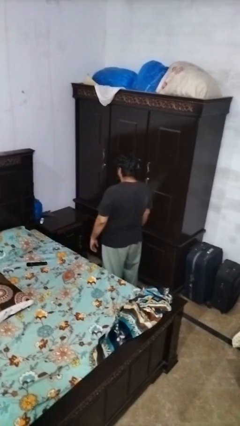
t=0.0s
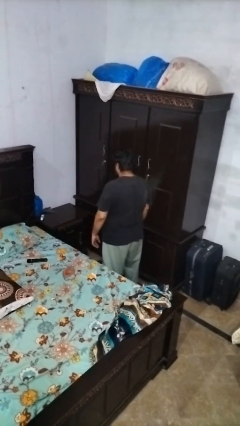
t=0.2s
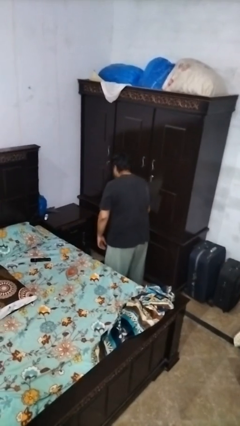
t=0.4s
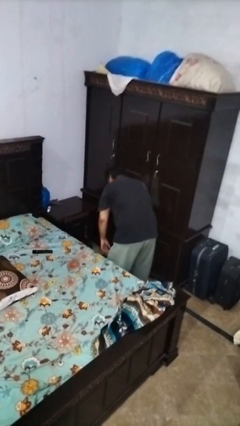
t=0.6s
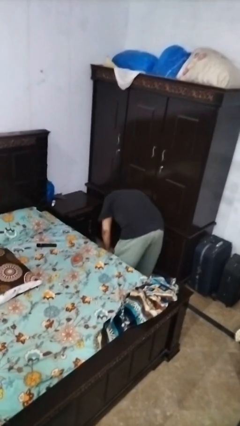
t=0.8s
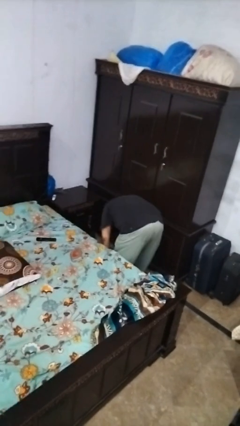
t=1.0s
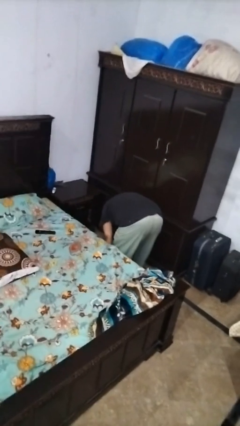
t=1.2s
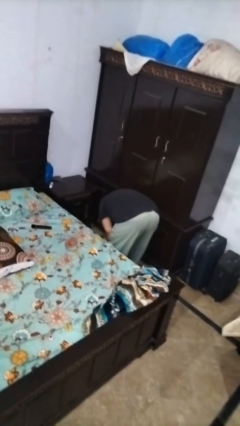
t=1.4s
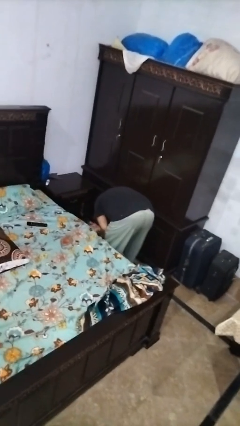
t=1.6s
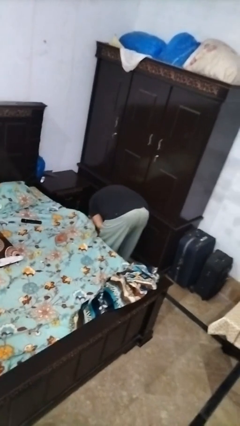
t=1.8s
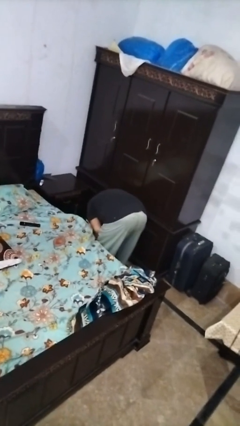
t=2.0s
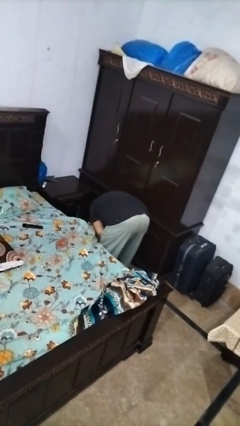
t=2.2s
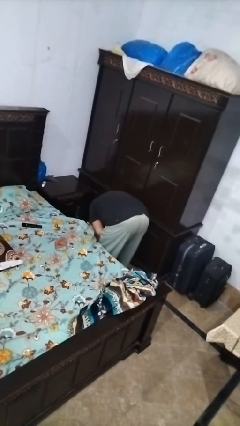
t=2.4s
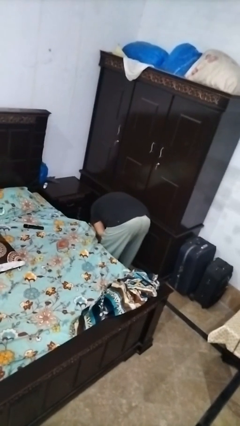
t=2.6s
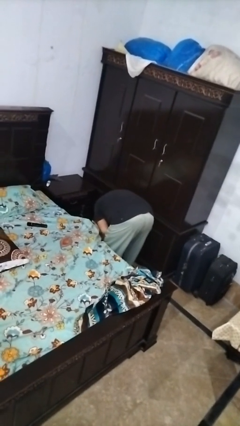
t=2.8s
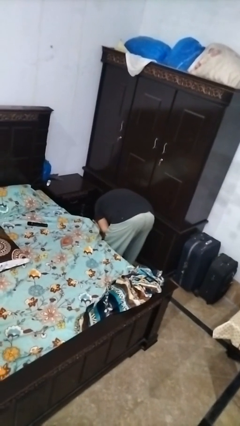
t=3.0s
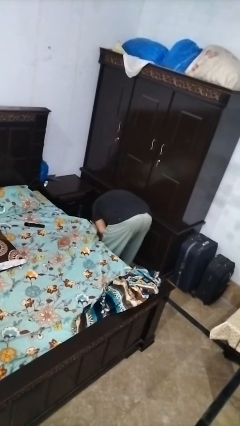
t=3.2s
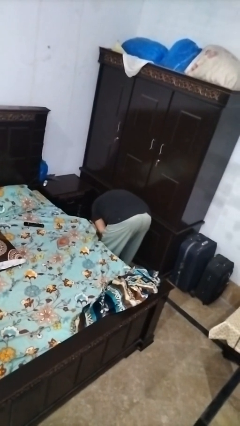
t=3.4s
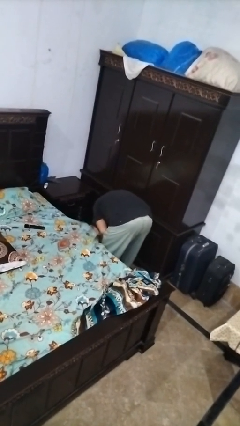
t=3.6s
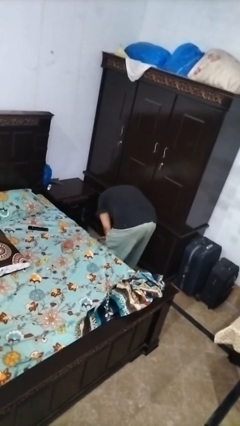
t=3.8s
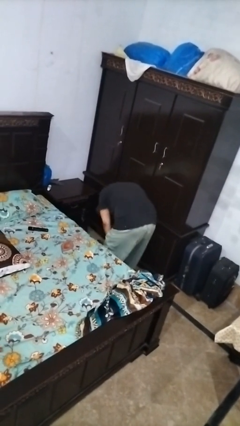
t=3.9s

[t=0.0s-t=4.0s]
person searches under bed

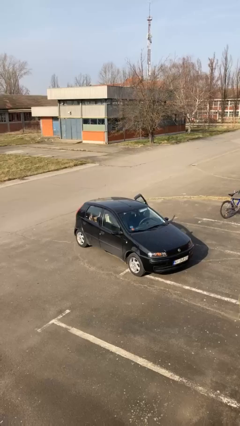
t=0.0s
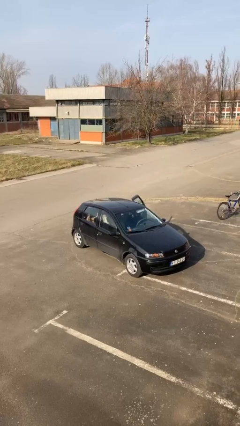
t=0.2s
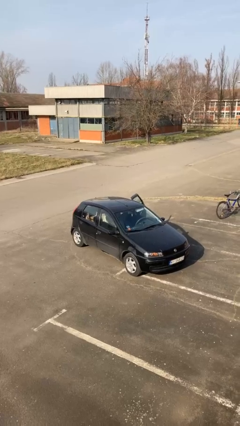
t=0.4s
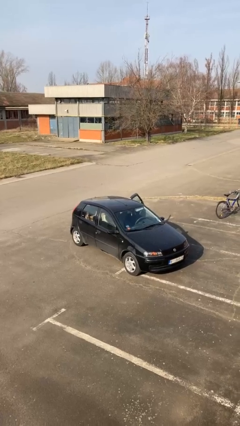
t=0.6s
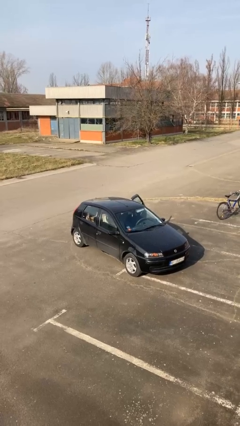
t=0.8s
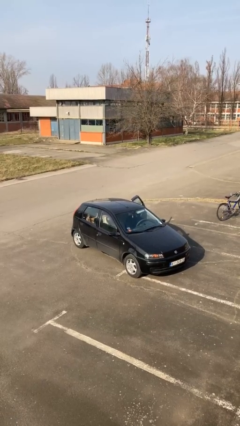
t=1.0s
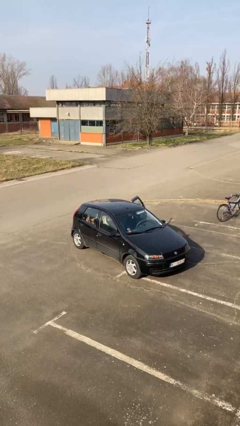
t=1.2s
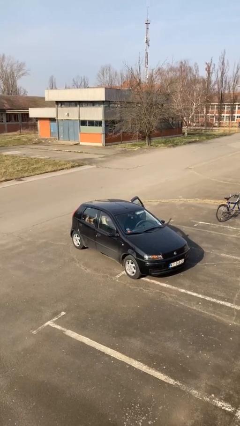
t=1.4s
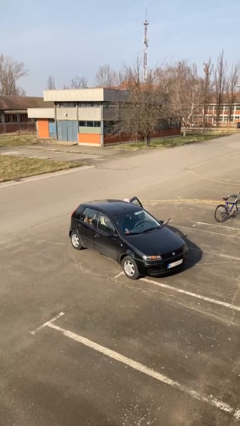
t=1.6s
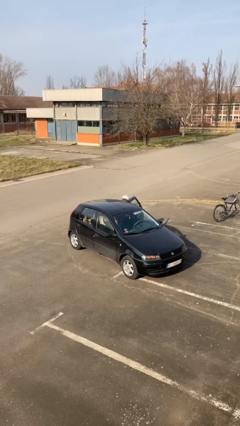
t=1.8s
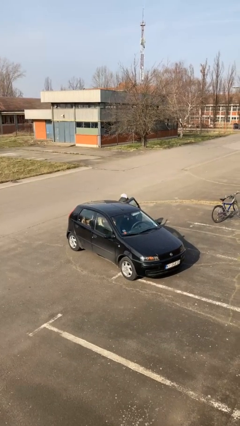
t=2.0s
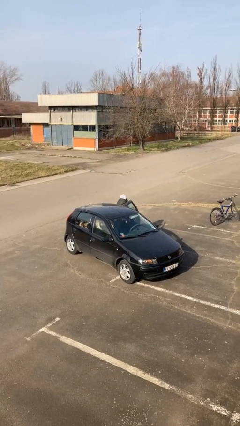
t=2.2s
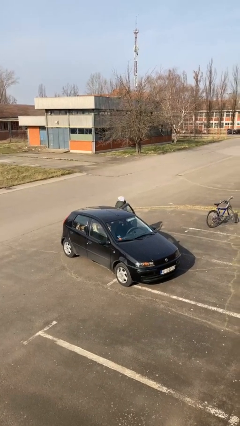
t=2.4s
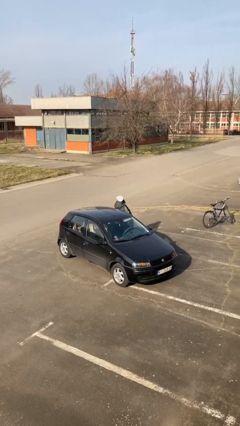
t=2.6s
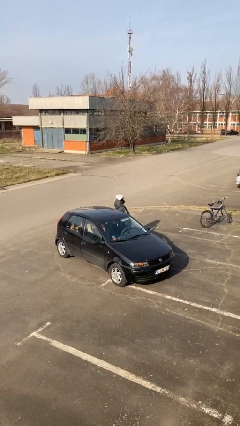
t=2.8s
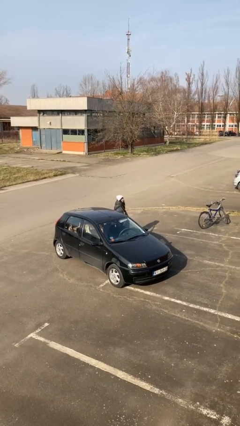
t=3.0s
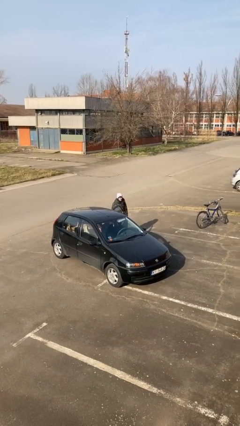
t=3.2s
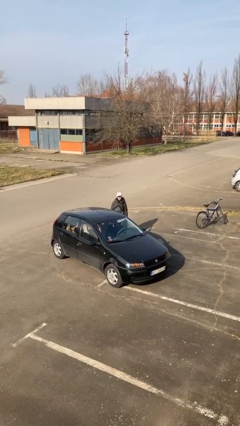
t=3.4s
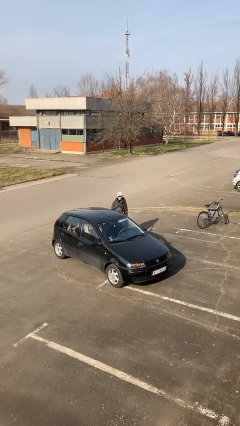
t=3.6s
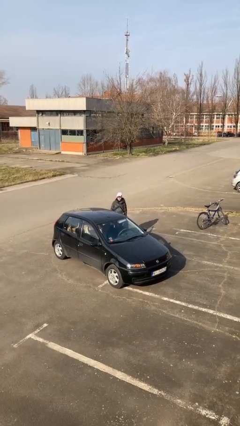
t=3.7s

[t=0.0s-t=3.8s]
person exits car

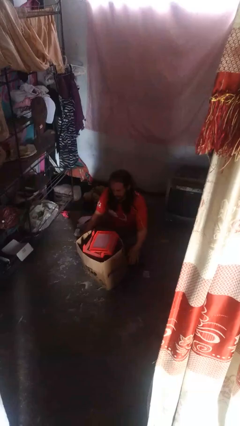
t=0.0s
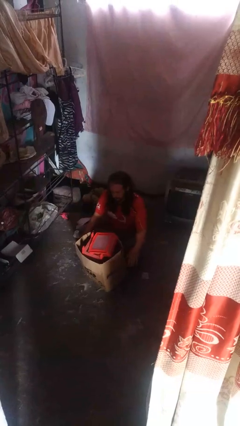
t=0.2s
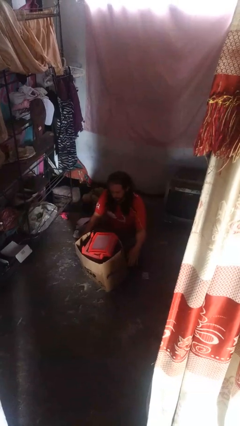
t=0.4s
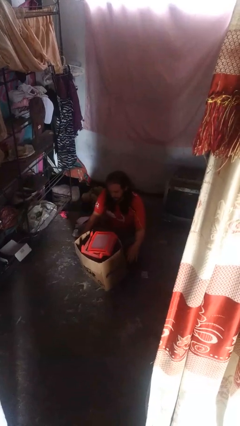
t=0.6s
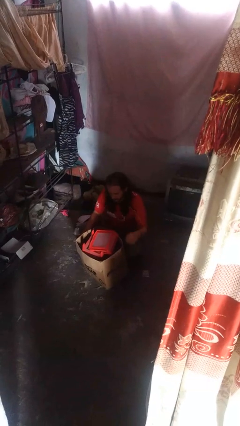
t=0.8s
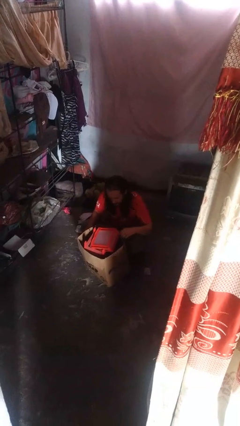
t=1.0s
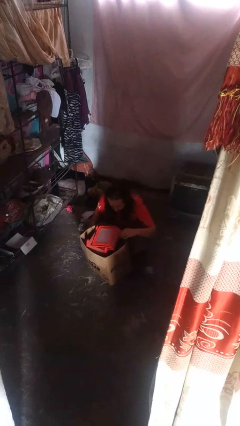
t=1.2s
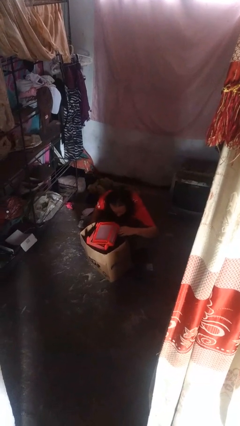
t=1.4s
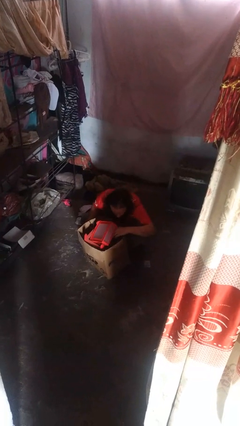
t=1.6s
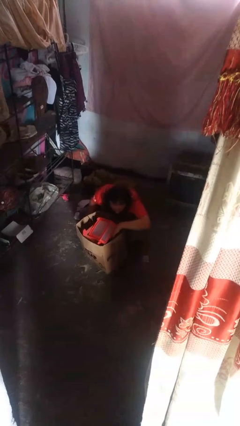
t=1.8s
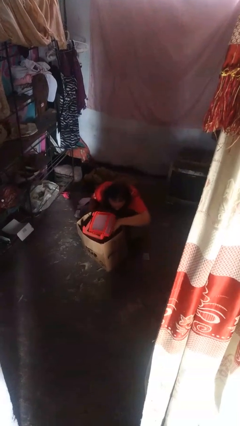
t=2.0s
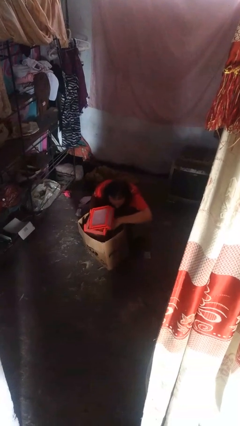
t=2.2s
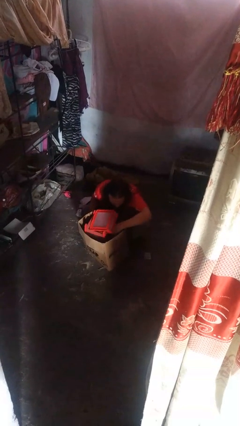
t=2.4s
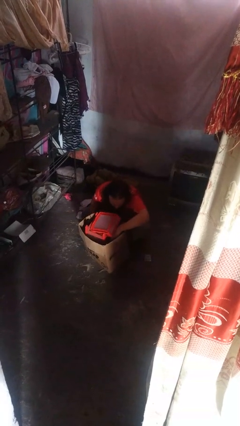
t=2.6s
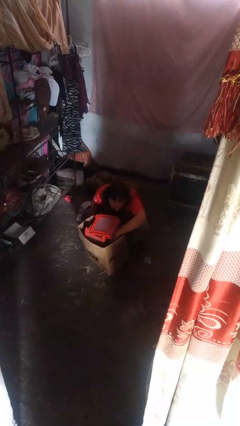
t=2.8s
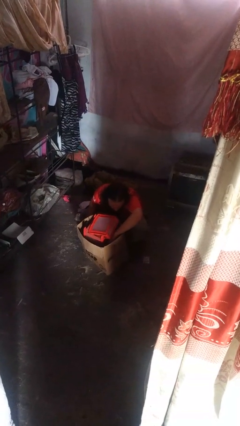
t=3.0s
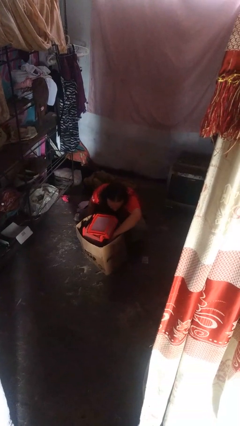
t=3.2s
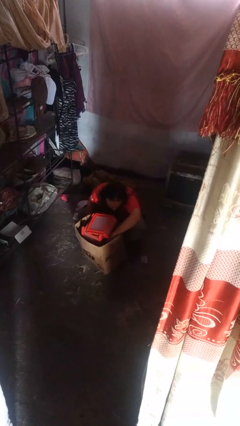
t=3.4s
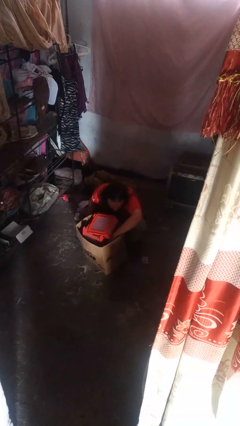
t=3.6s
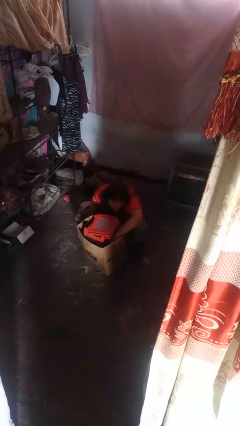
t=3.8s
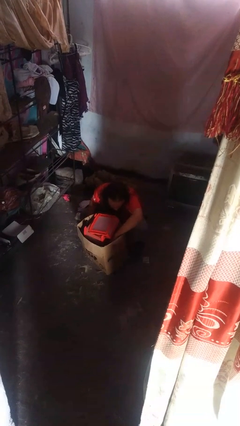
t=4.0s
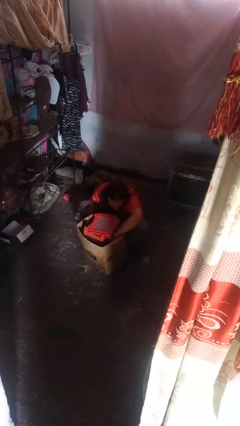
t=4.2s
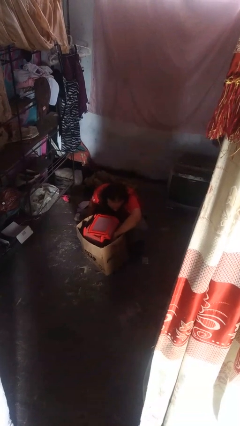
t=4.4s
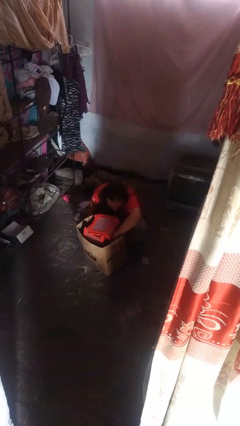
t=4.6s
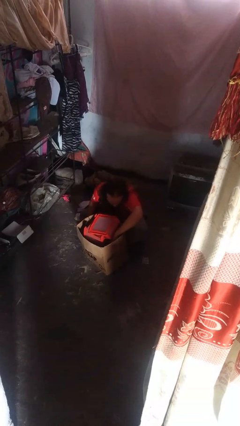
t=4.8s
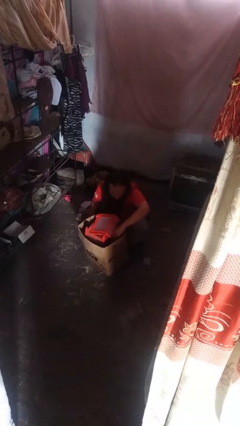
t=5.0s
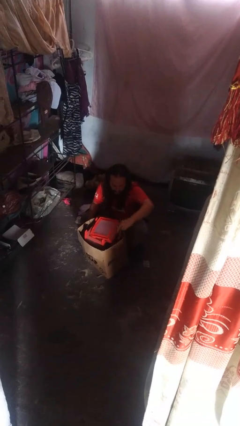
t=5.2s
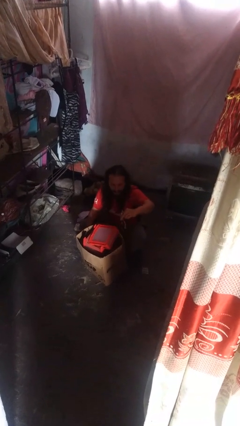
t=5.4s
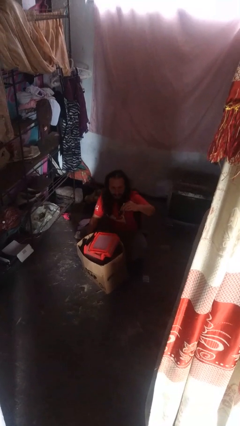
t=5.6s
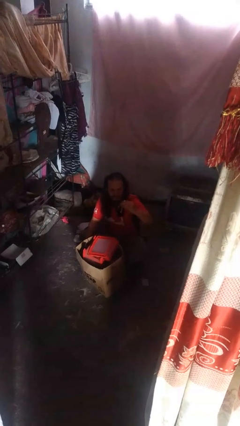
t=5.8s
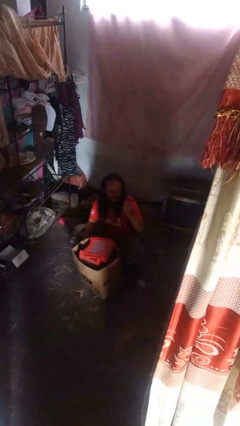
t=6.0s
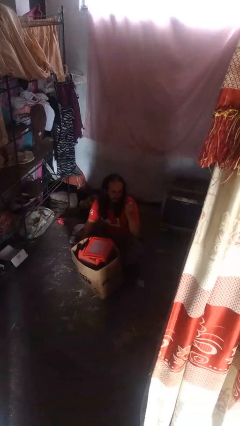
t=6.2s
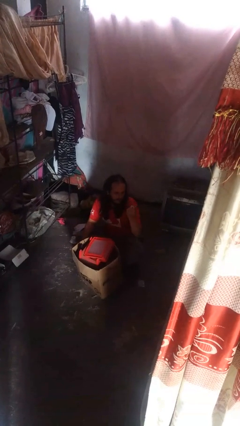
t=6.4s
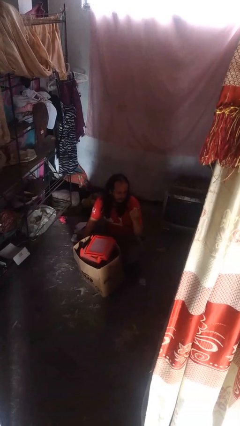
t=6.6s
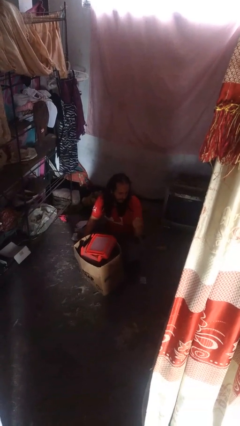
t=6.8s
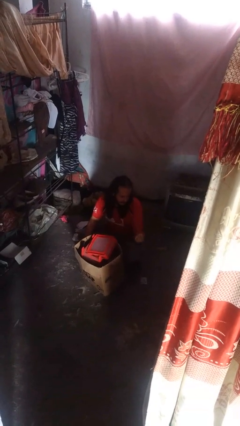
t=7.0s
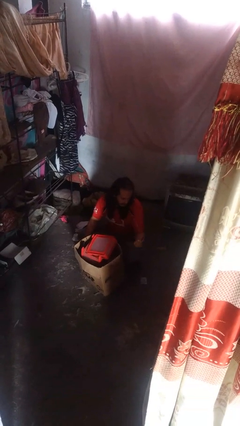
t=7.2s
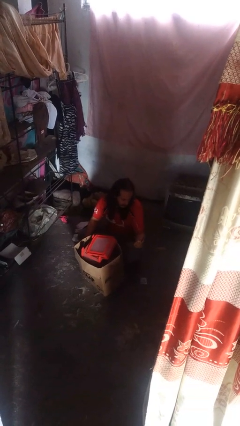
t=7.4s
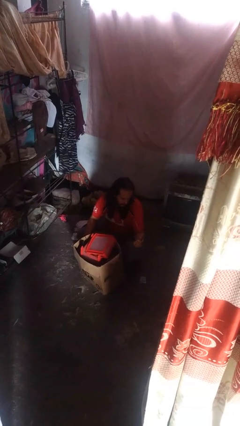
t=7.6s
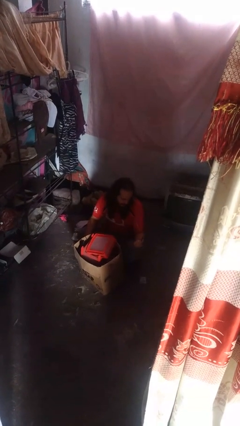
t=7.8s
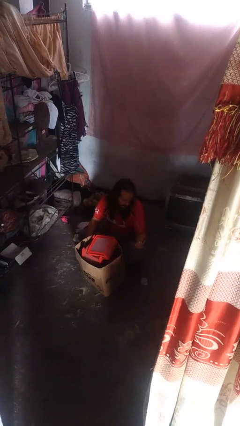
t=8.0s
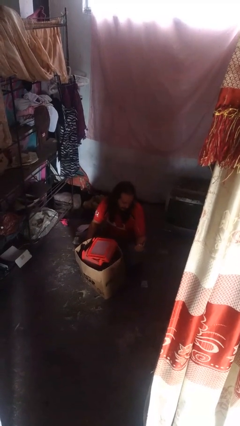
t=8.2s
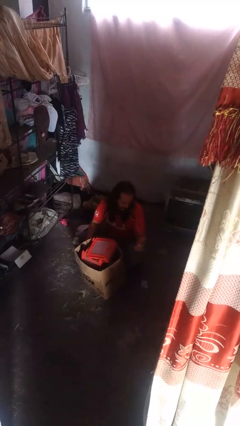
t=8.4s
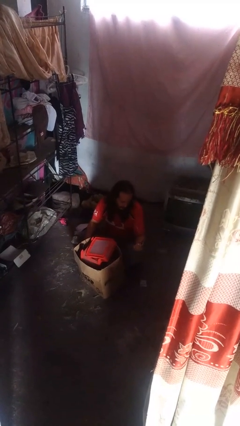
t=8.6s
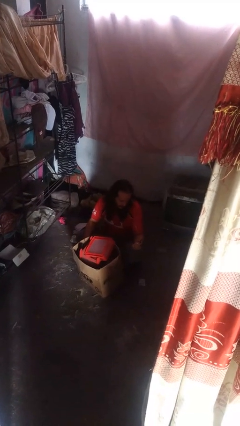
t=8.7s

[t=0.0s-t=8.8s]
person takes object from box

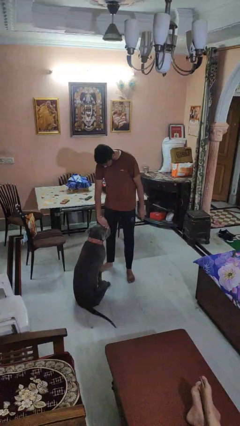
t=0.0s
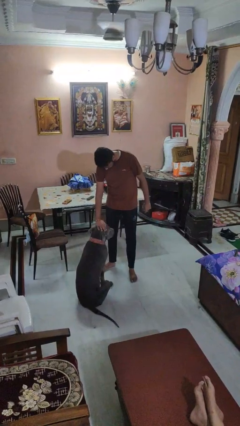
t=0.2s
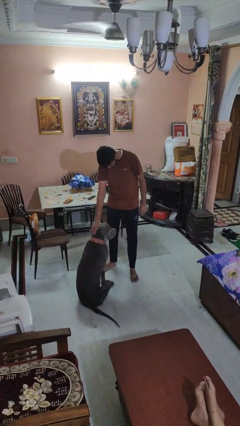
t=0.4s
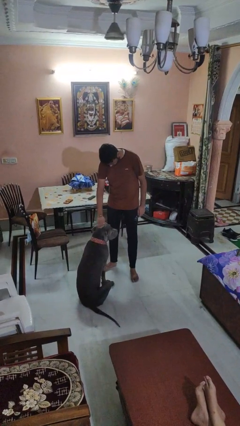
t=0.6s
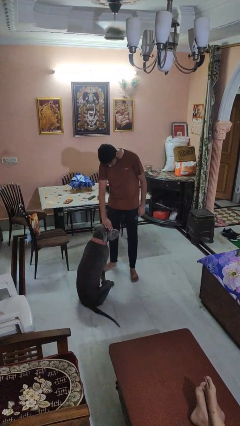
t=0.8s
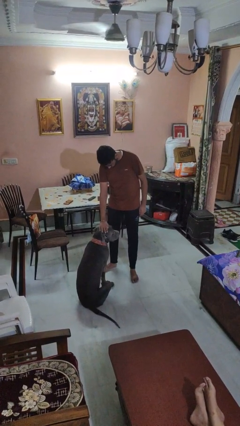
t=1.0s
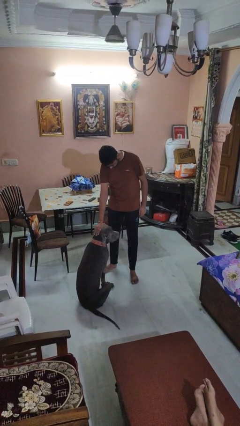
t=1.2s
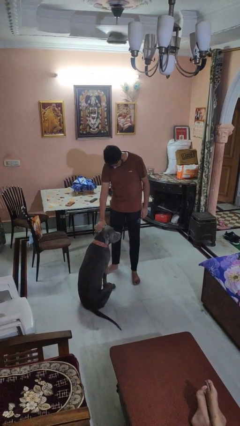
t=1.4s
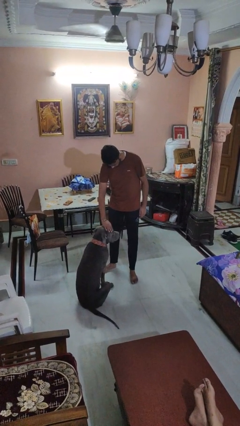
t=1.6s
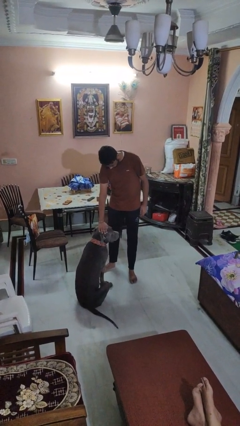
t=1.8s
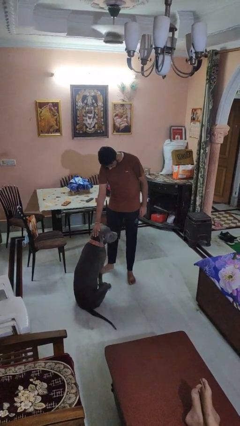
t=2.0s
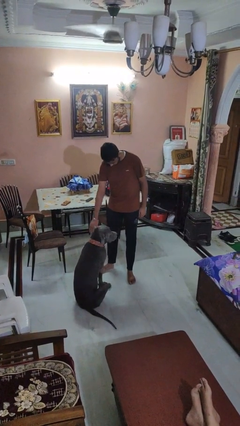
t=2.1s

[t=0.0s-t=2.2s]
person pets dog
